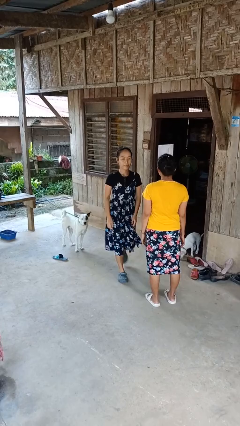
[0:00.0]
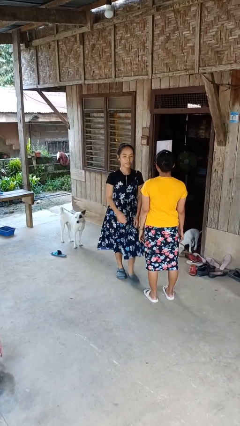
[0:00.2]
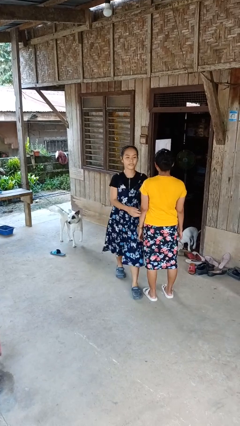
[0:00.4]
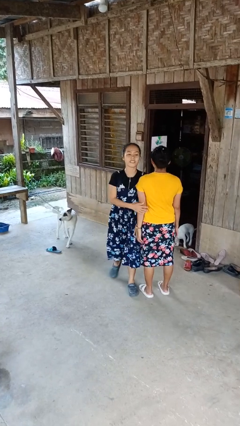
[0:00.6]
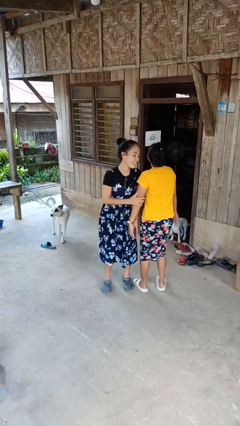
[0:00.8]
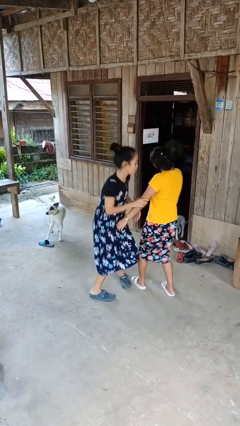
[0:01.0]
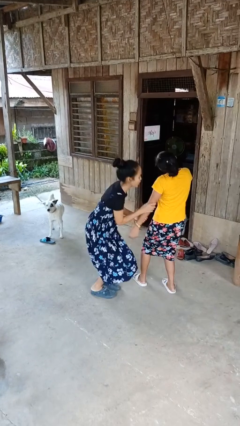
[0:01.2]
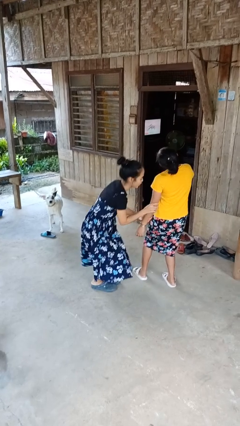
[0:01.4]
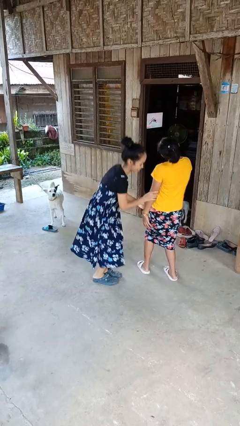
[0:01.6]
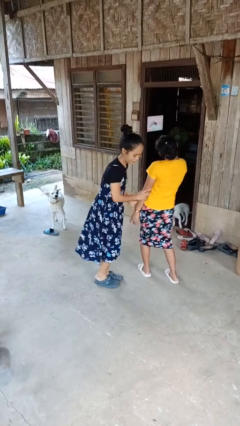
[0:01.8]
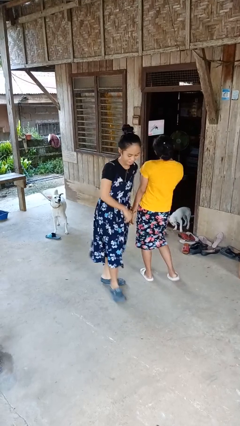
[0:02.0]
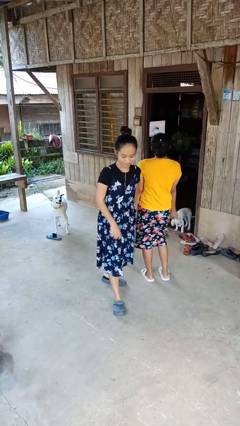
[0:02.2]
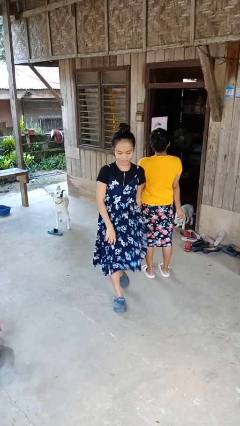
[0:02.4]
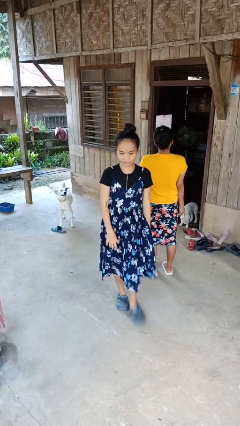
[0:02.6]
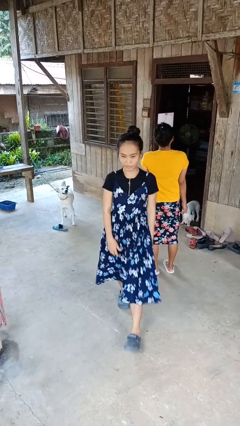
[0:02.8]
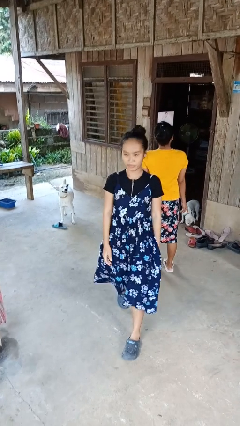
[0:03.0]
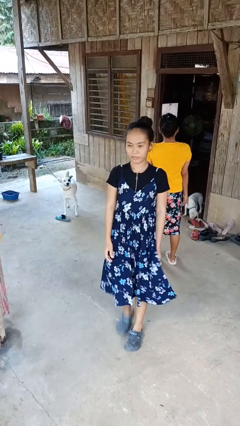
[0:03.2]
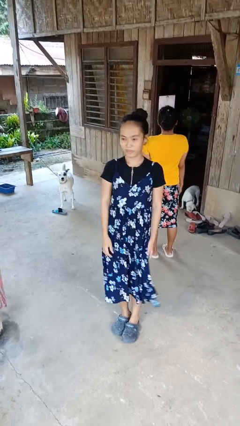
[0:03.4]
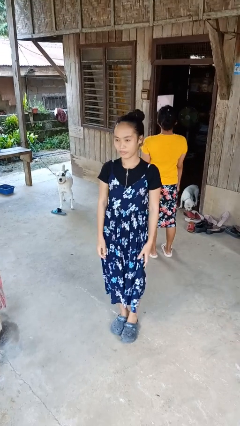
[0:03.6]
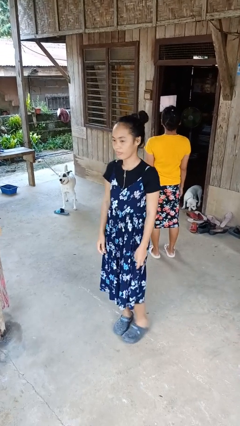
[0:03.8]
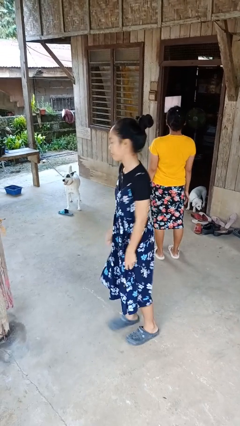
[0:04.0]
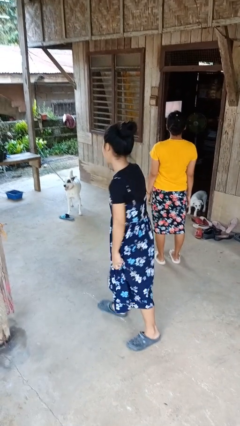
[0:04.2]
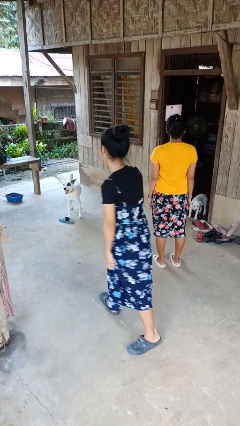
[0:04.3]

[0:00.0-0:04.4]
person bumps into person

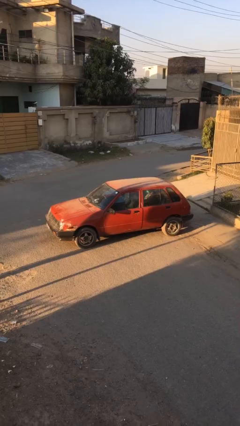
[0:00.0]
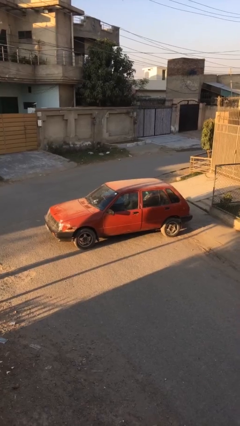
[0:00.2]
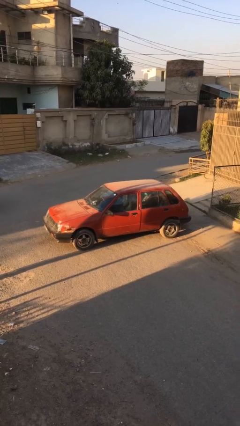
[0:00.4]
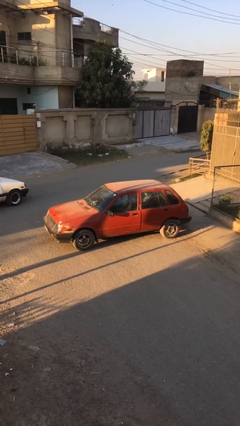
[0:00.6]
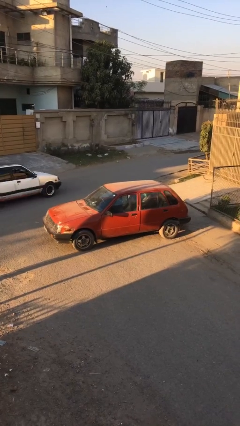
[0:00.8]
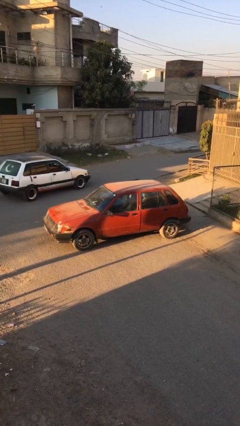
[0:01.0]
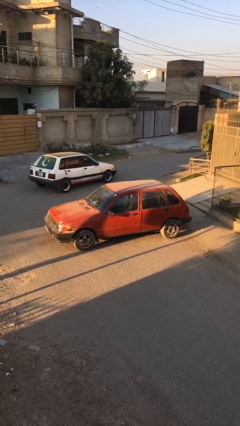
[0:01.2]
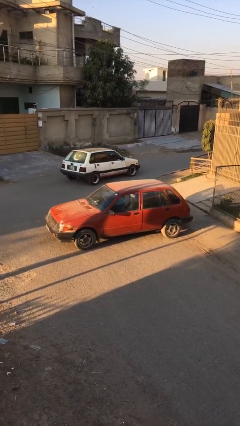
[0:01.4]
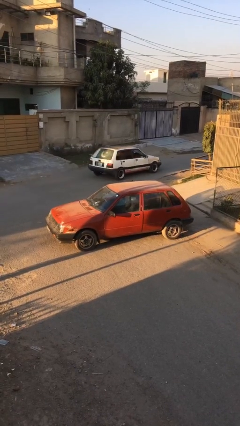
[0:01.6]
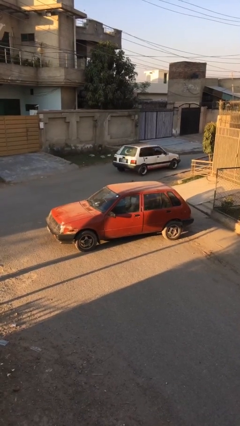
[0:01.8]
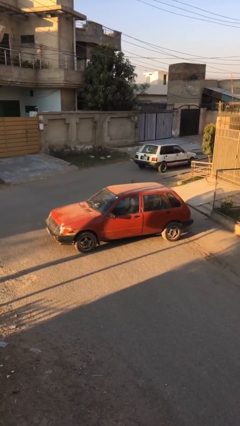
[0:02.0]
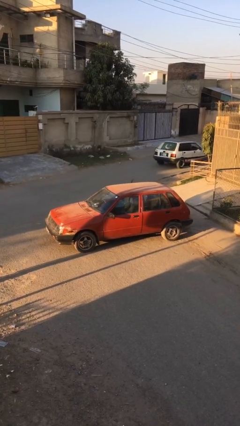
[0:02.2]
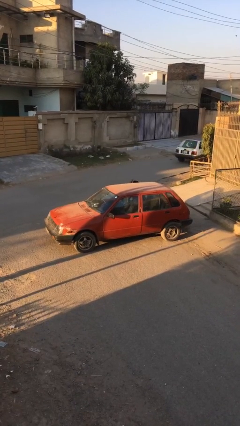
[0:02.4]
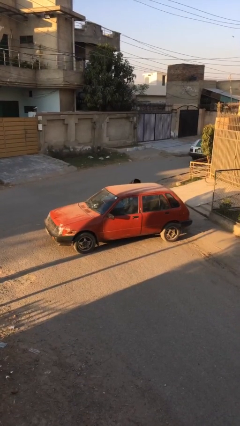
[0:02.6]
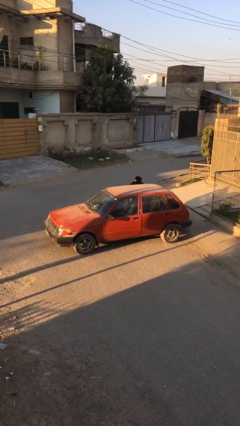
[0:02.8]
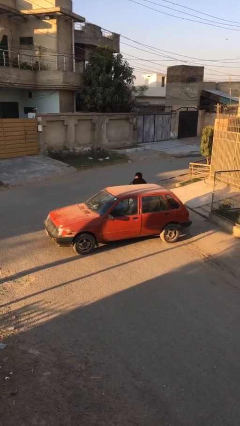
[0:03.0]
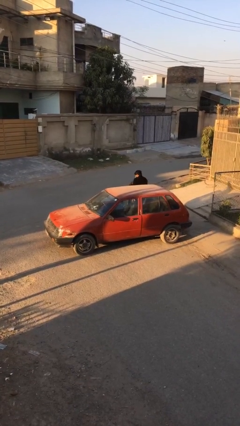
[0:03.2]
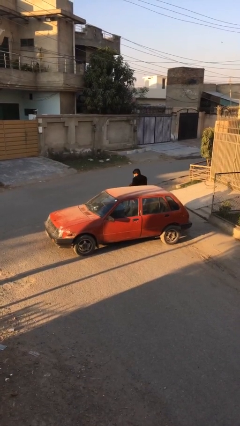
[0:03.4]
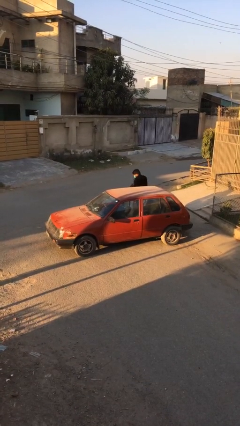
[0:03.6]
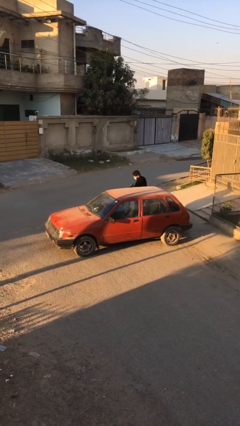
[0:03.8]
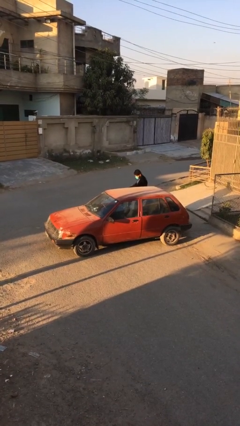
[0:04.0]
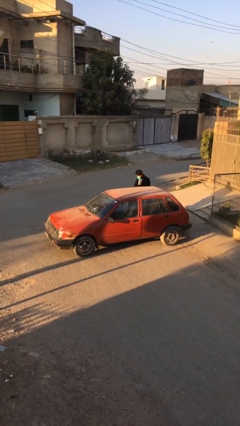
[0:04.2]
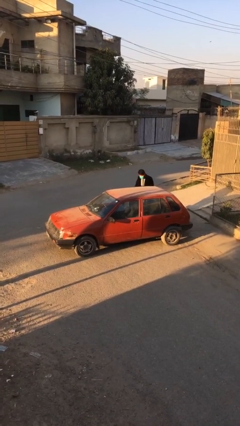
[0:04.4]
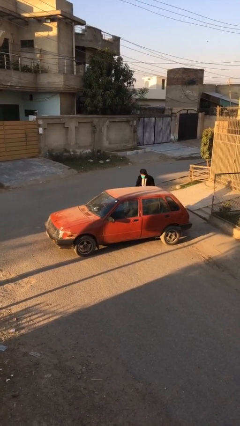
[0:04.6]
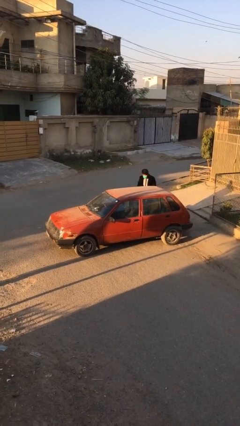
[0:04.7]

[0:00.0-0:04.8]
car drops off person

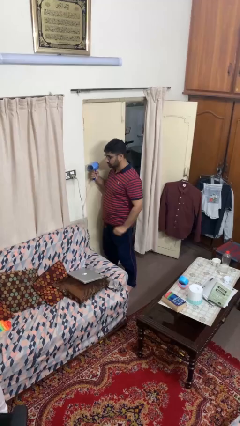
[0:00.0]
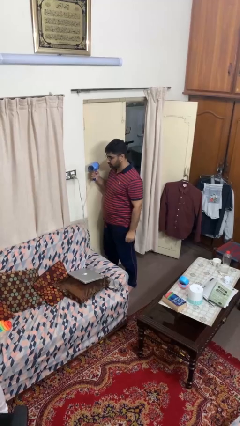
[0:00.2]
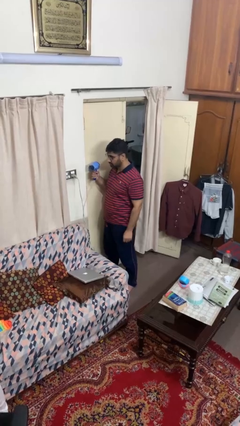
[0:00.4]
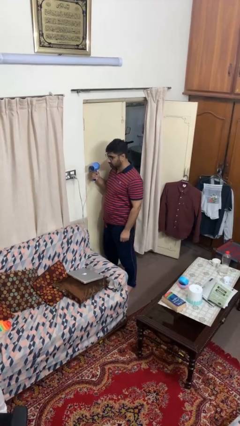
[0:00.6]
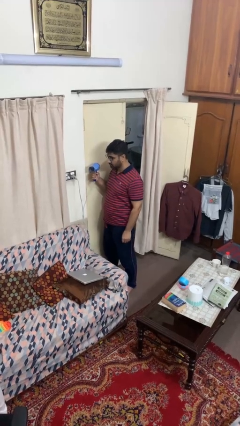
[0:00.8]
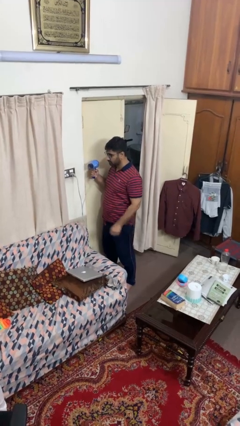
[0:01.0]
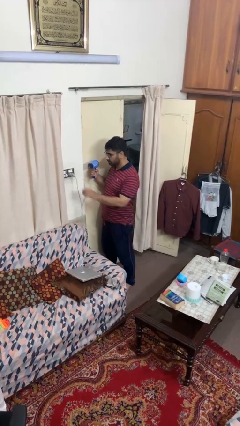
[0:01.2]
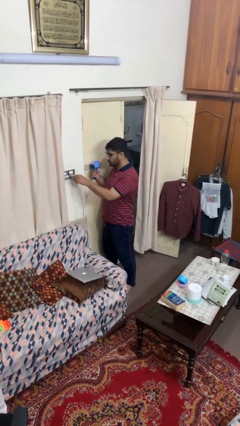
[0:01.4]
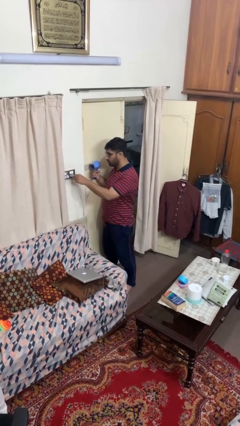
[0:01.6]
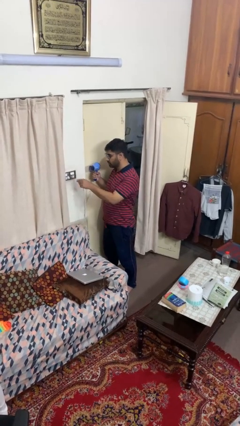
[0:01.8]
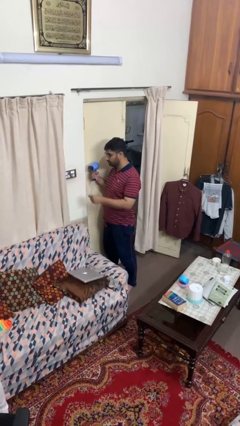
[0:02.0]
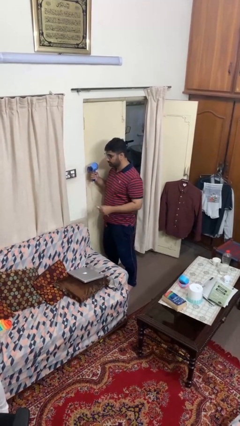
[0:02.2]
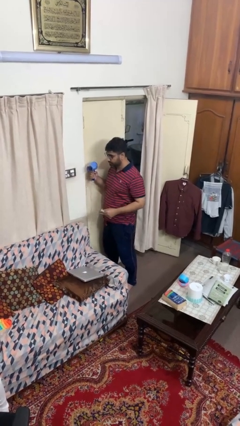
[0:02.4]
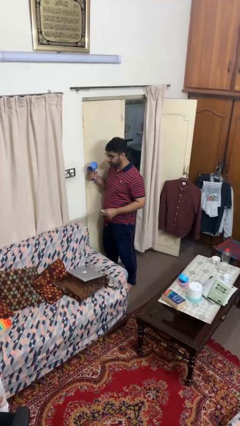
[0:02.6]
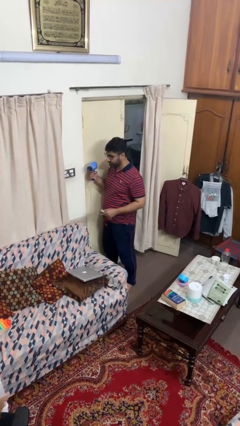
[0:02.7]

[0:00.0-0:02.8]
person unplugs from electrical socket

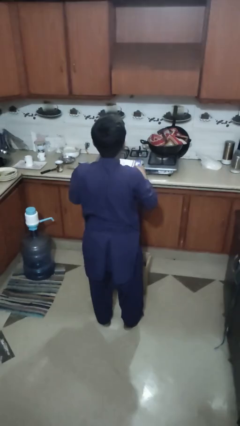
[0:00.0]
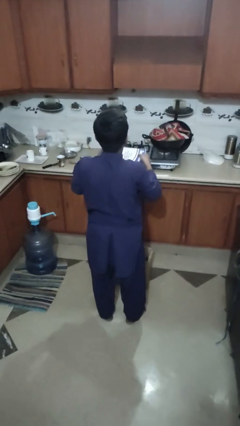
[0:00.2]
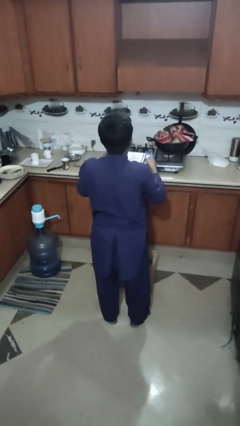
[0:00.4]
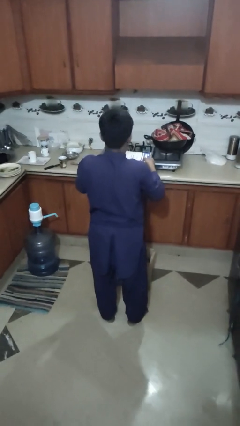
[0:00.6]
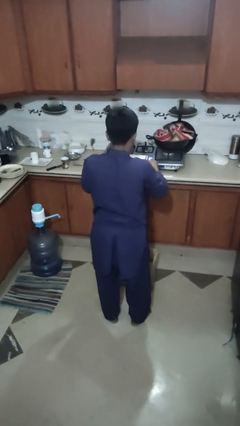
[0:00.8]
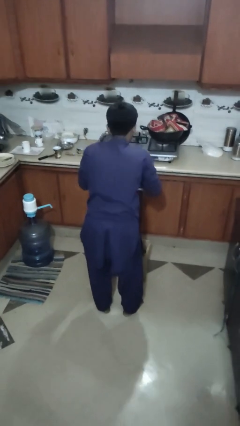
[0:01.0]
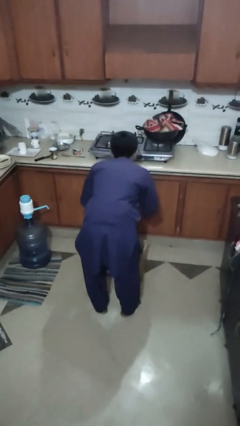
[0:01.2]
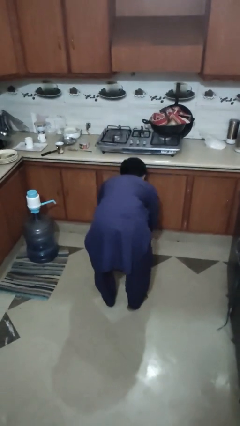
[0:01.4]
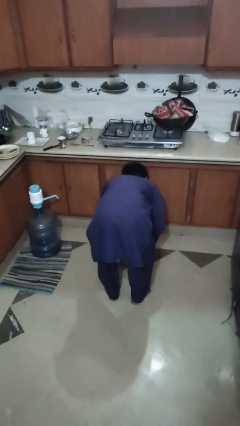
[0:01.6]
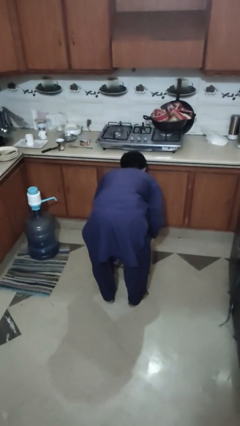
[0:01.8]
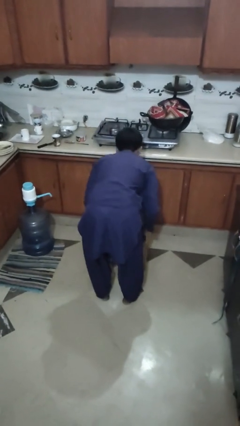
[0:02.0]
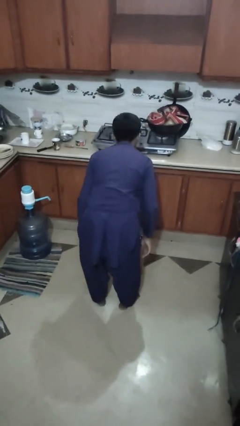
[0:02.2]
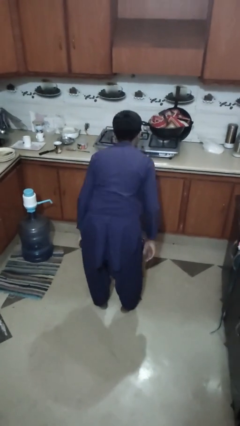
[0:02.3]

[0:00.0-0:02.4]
person puts object into box

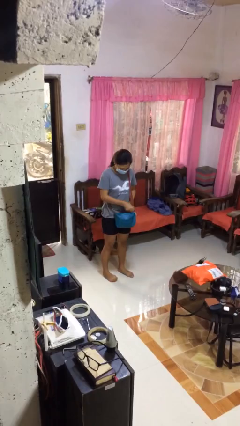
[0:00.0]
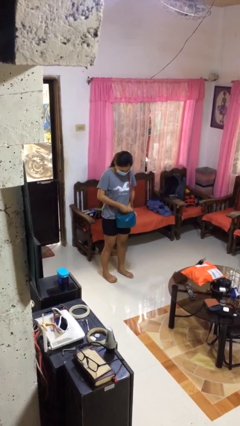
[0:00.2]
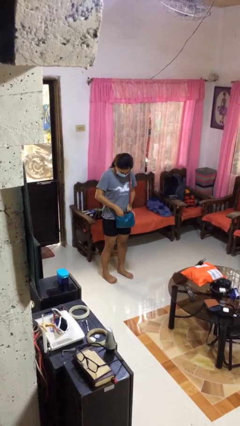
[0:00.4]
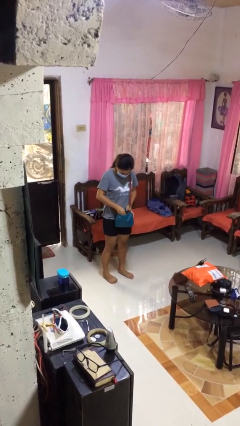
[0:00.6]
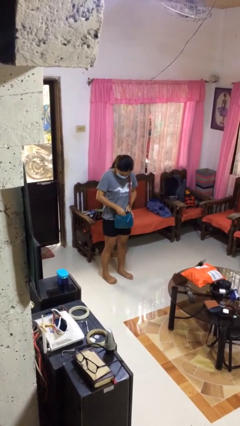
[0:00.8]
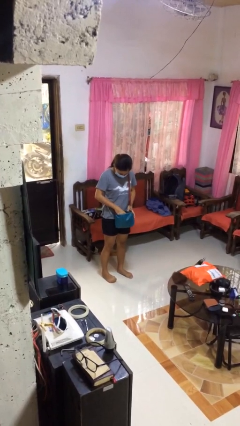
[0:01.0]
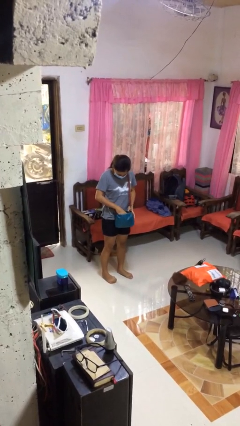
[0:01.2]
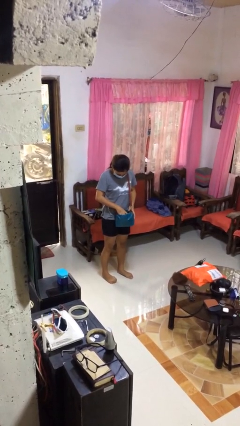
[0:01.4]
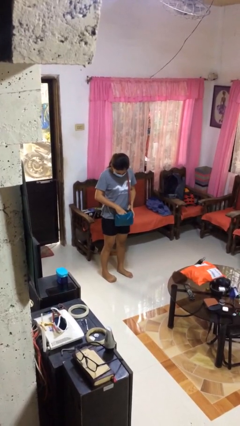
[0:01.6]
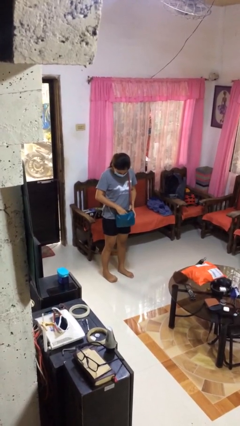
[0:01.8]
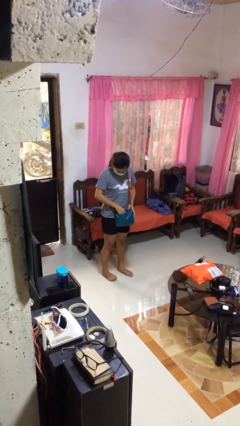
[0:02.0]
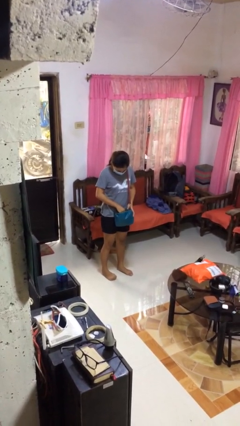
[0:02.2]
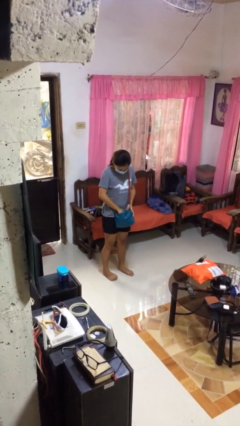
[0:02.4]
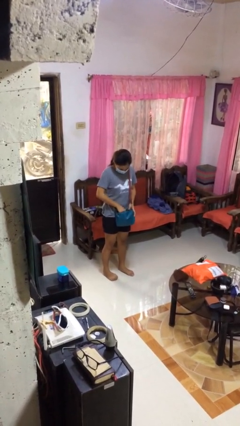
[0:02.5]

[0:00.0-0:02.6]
person searches in purse

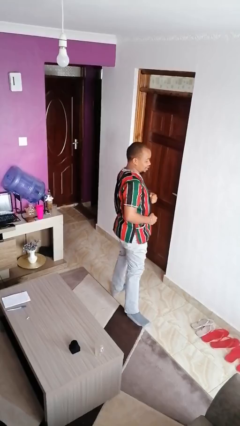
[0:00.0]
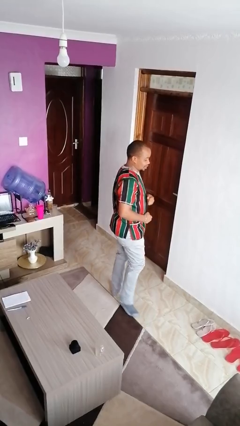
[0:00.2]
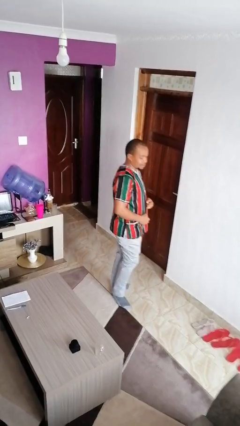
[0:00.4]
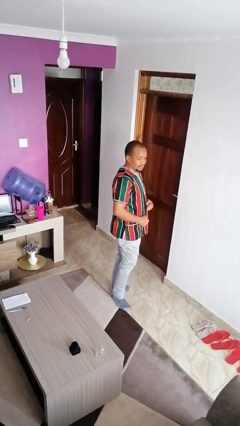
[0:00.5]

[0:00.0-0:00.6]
person karate chop
